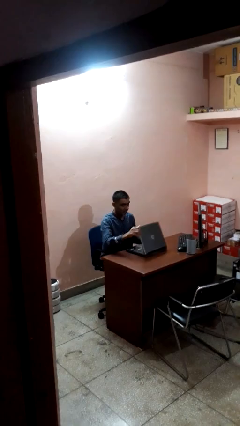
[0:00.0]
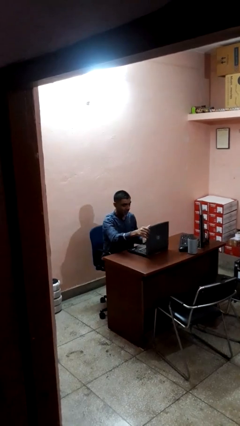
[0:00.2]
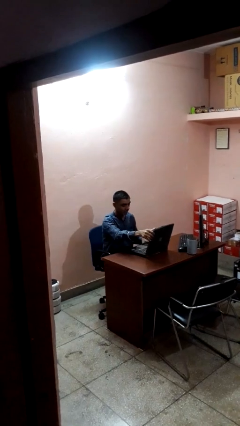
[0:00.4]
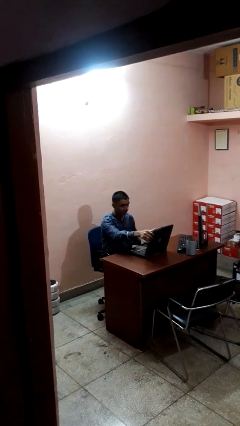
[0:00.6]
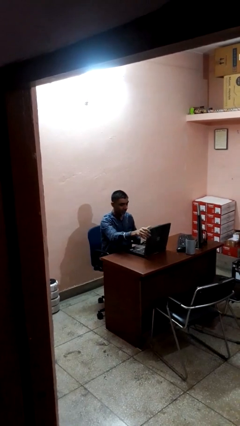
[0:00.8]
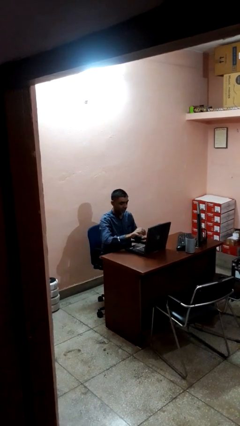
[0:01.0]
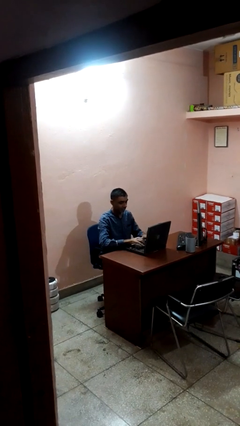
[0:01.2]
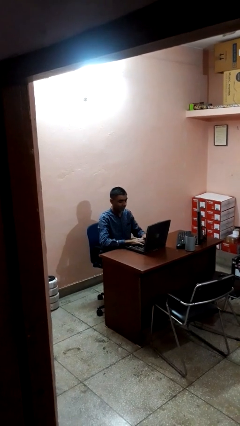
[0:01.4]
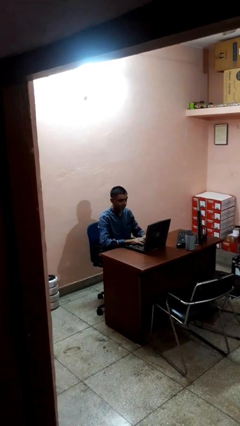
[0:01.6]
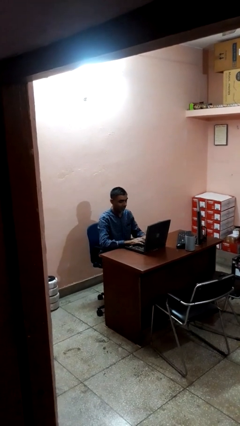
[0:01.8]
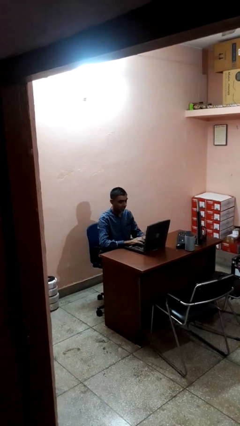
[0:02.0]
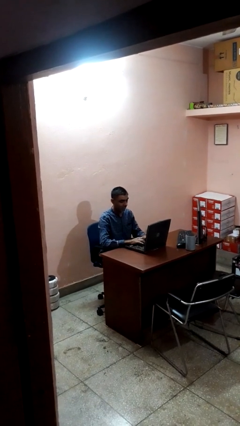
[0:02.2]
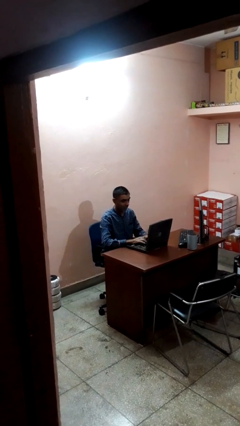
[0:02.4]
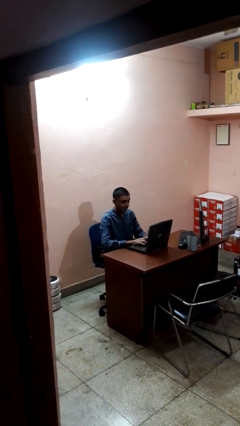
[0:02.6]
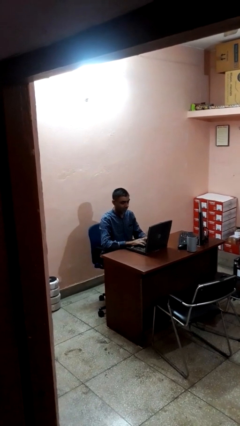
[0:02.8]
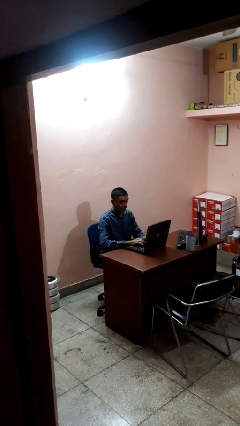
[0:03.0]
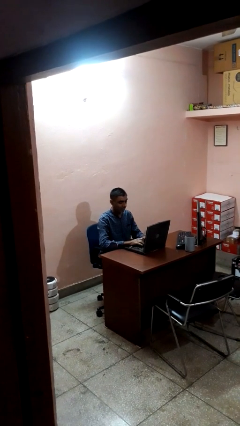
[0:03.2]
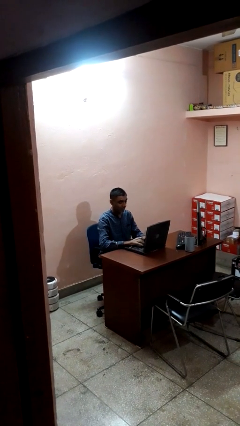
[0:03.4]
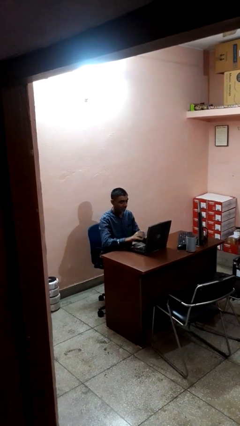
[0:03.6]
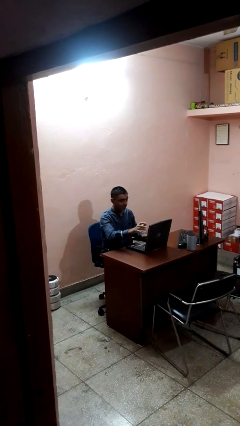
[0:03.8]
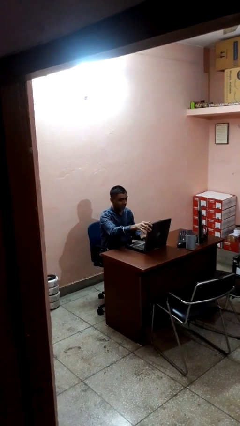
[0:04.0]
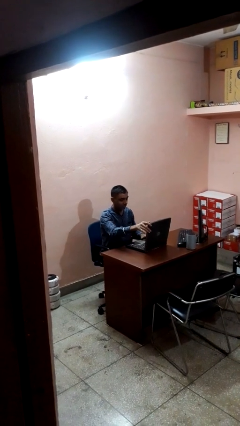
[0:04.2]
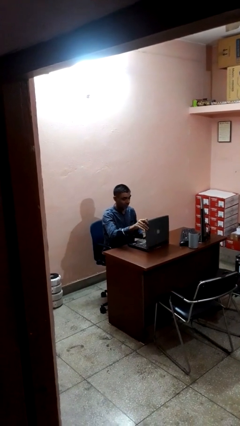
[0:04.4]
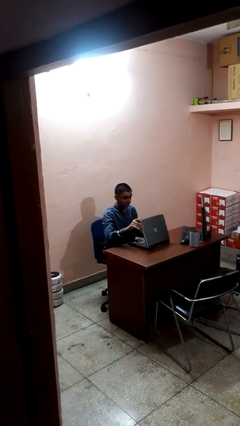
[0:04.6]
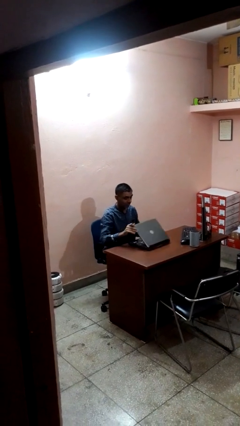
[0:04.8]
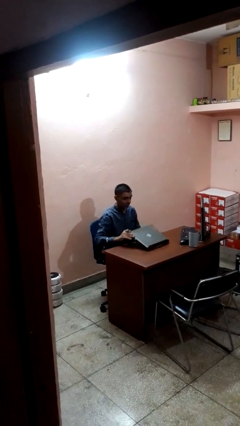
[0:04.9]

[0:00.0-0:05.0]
person interacts with laptop

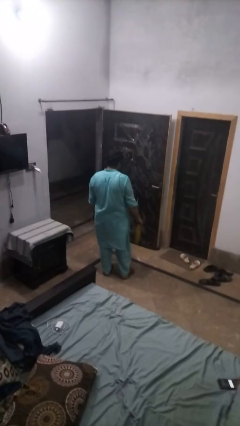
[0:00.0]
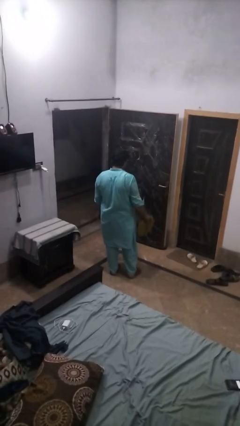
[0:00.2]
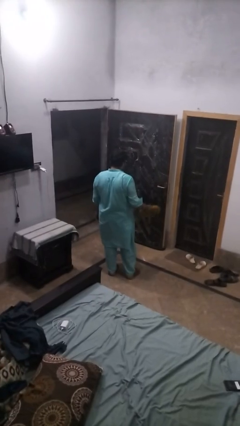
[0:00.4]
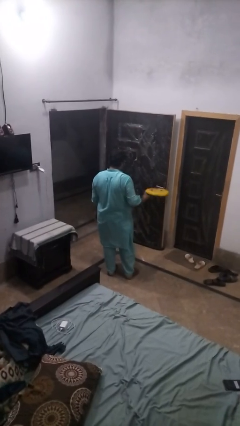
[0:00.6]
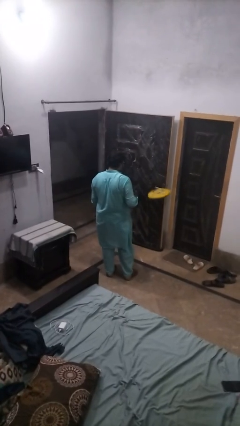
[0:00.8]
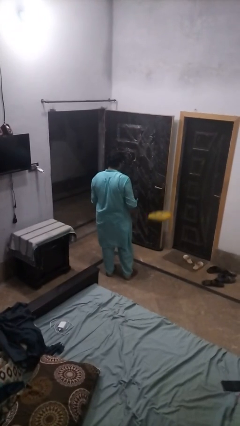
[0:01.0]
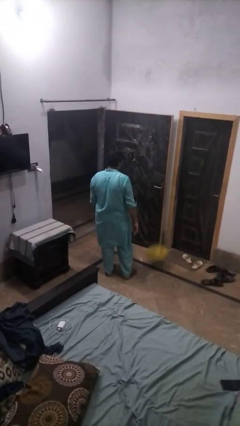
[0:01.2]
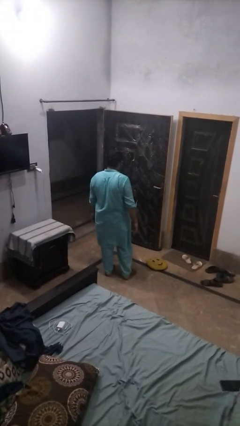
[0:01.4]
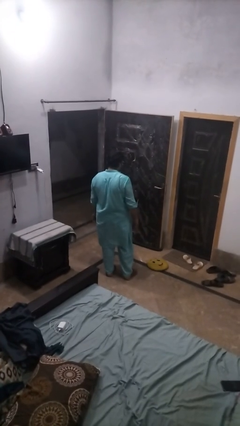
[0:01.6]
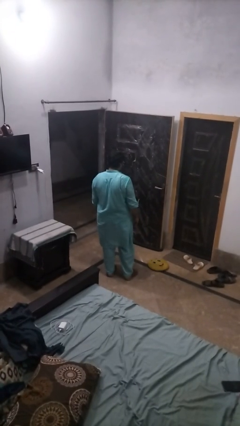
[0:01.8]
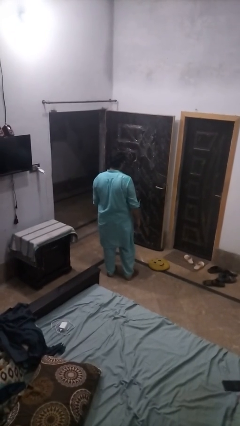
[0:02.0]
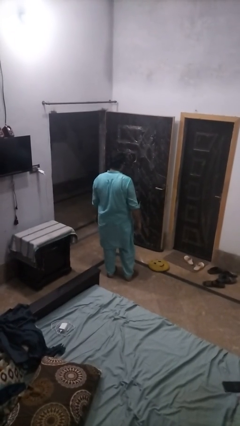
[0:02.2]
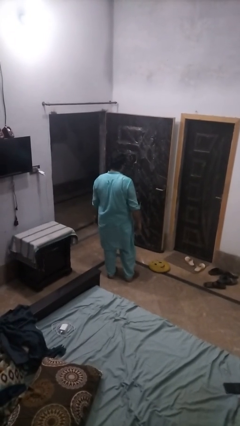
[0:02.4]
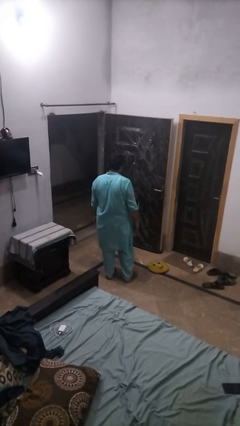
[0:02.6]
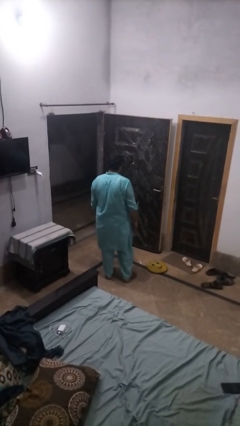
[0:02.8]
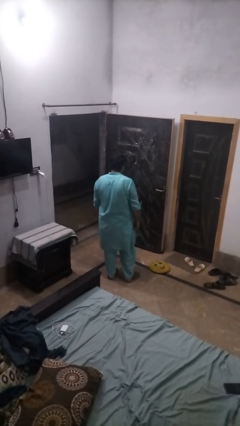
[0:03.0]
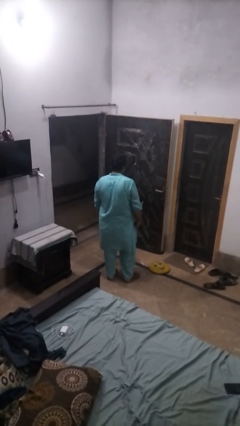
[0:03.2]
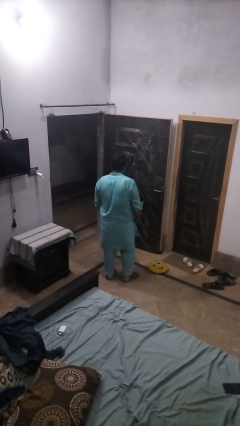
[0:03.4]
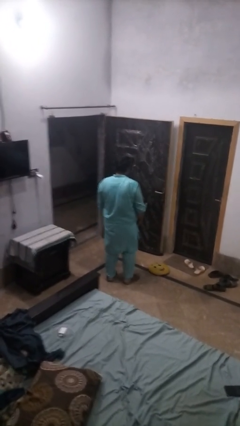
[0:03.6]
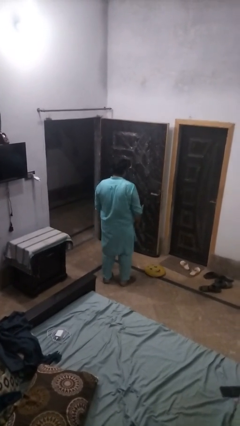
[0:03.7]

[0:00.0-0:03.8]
person throws object to ground

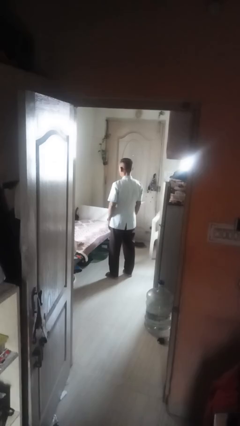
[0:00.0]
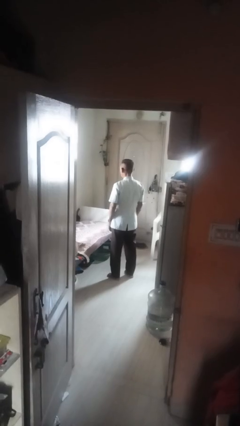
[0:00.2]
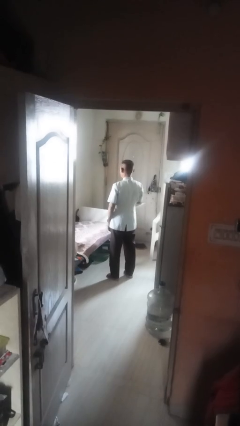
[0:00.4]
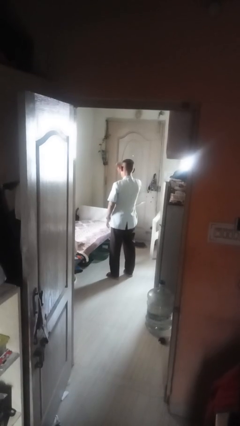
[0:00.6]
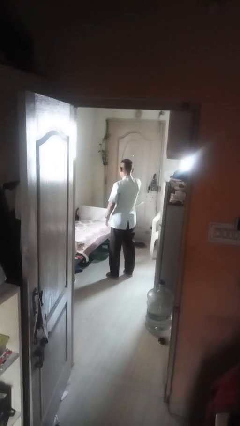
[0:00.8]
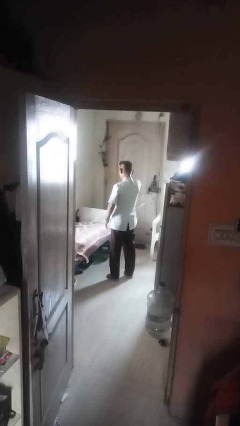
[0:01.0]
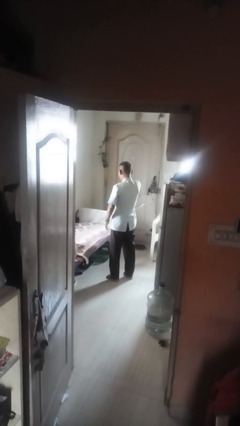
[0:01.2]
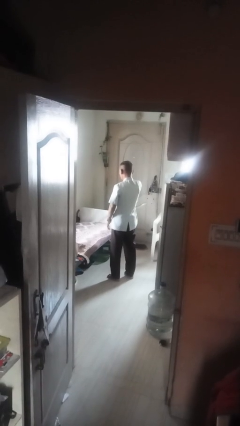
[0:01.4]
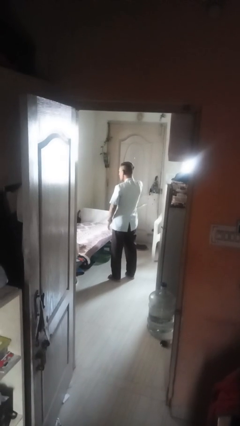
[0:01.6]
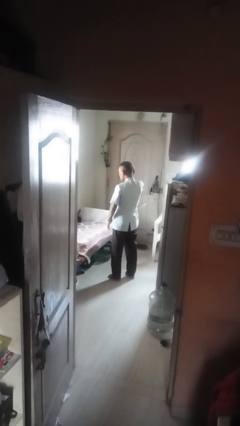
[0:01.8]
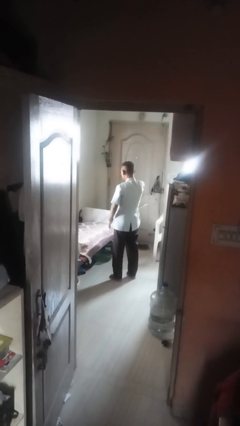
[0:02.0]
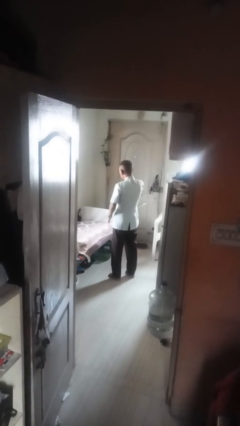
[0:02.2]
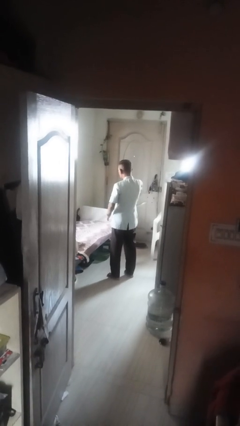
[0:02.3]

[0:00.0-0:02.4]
person strokes hair

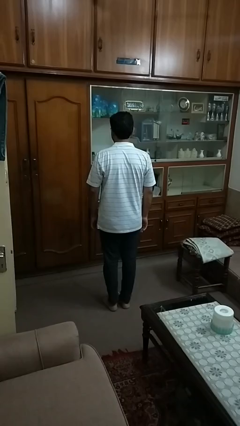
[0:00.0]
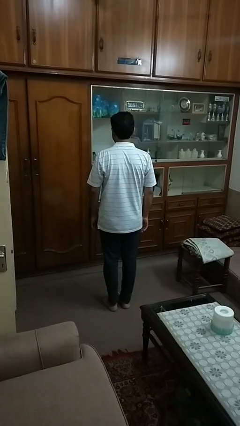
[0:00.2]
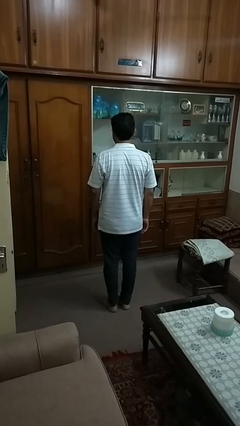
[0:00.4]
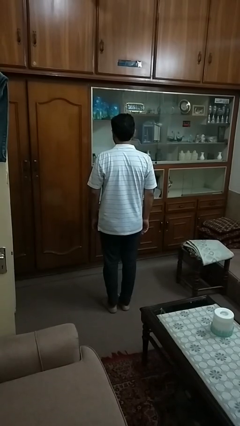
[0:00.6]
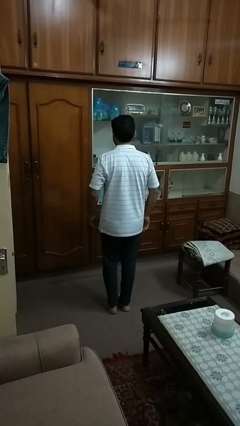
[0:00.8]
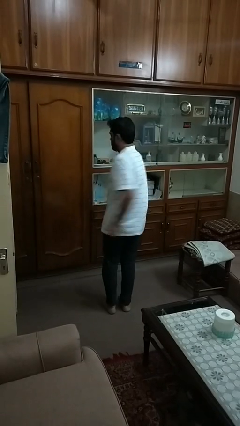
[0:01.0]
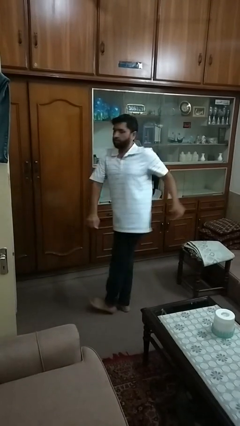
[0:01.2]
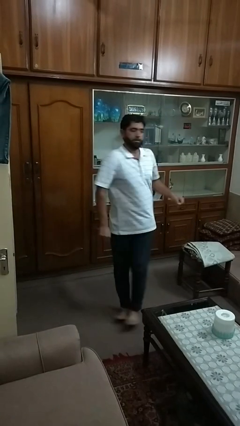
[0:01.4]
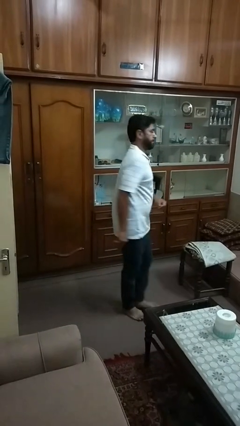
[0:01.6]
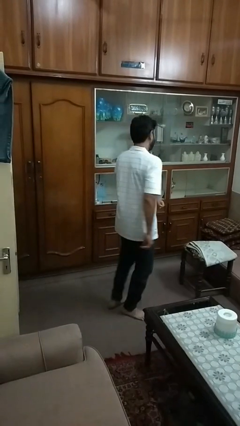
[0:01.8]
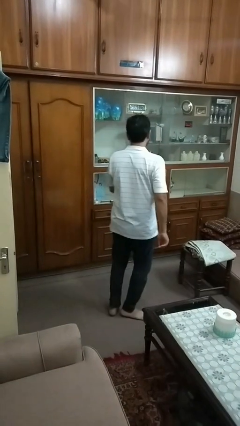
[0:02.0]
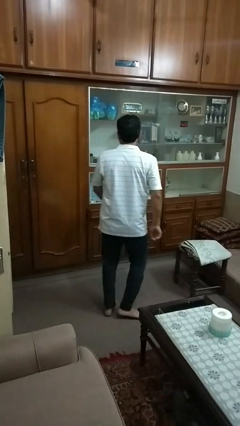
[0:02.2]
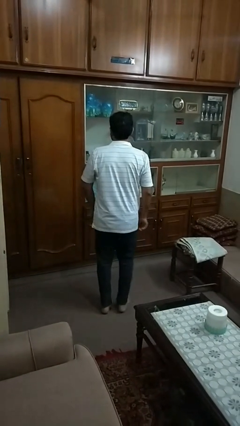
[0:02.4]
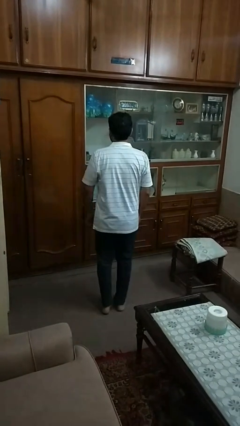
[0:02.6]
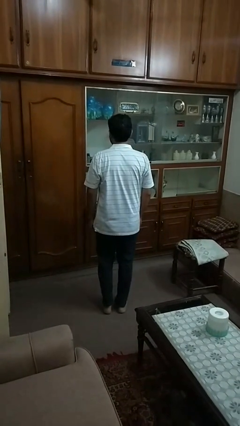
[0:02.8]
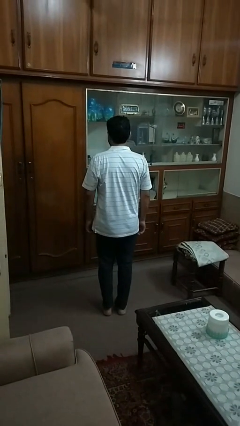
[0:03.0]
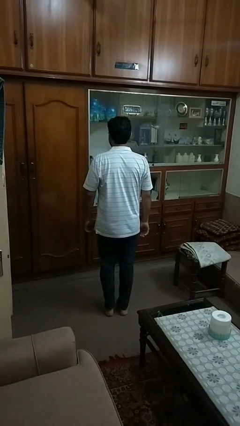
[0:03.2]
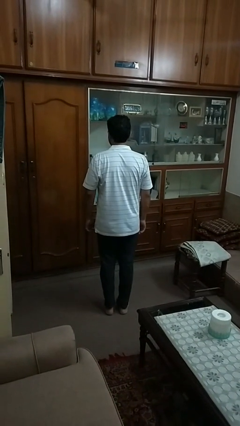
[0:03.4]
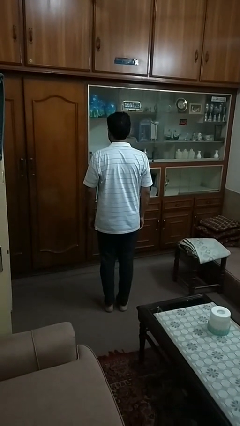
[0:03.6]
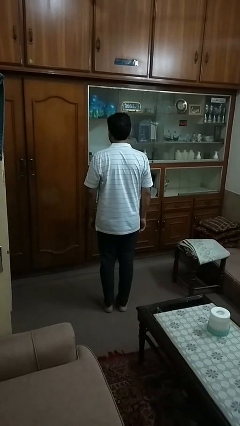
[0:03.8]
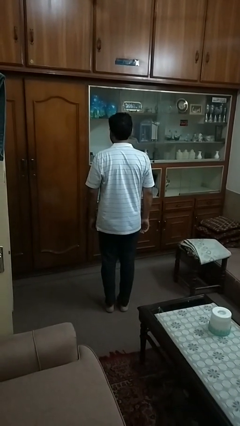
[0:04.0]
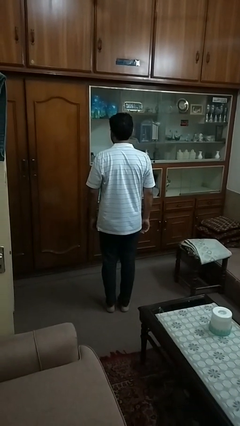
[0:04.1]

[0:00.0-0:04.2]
person twirls

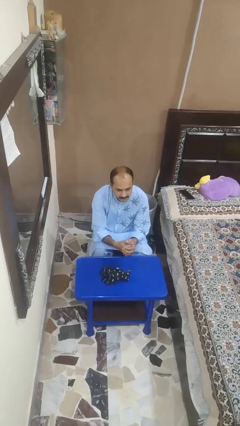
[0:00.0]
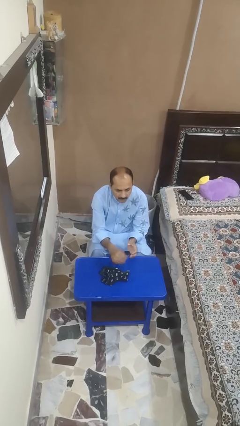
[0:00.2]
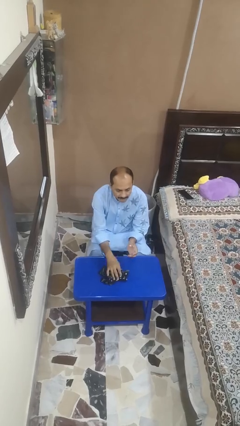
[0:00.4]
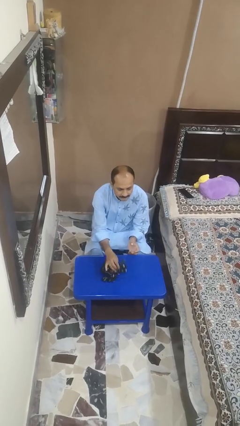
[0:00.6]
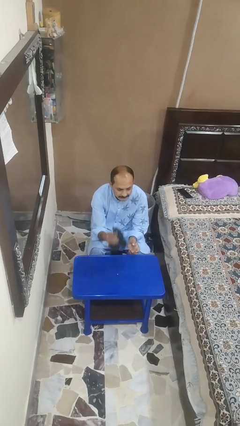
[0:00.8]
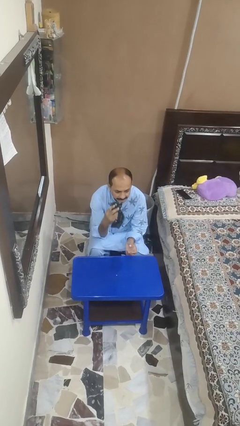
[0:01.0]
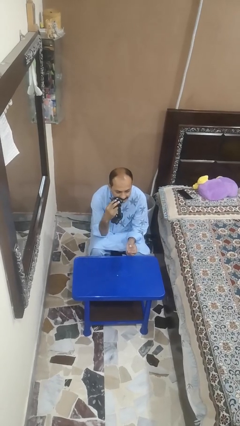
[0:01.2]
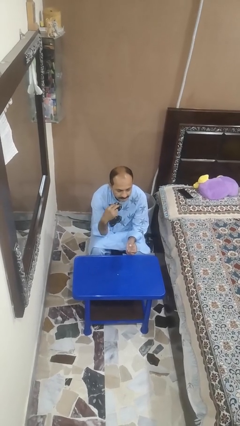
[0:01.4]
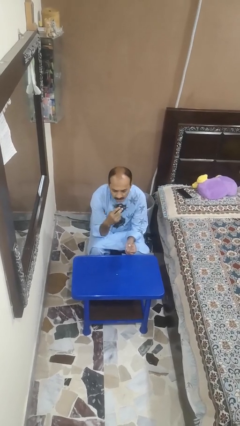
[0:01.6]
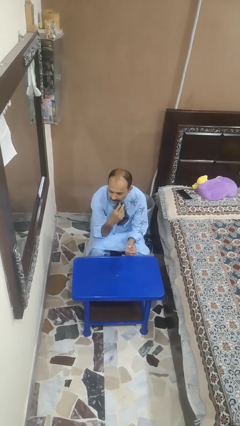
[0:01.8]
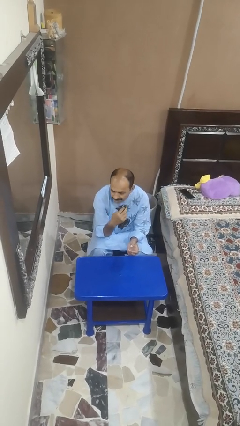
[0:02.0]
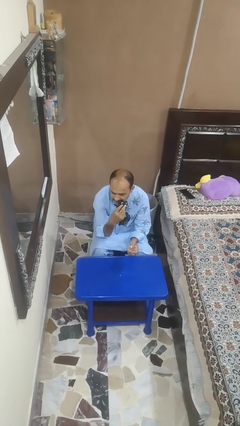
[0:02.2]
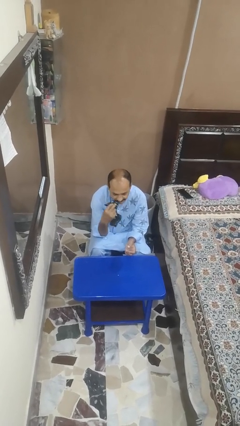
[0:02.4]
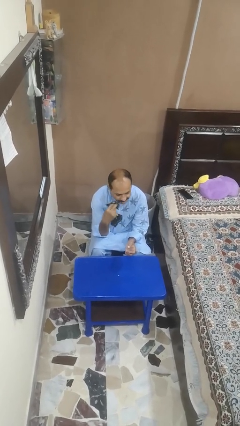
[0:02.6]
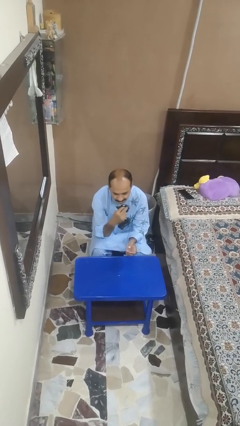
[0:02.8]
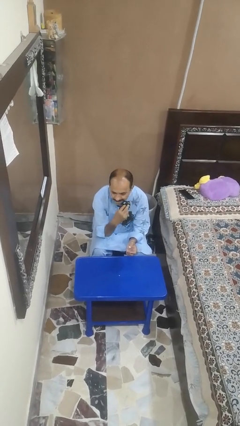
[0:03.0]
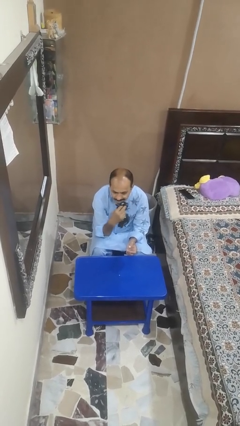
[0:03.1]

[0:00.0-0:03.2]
person wipes mouth with napkin
